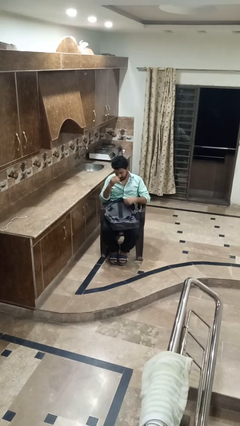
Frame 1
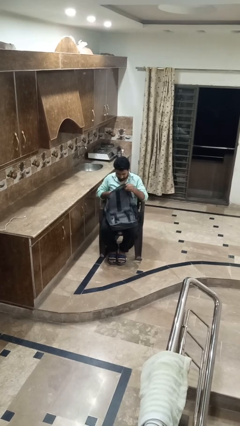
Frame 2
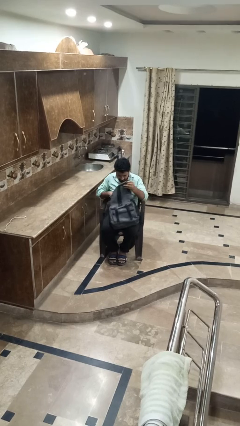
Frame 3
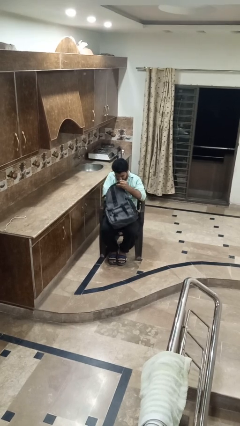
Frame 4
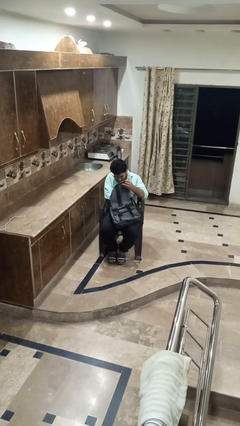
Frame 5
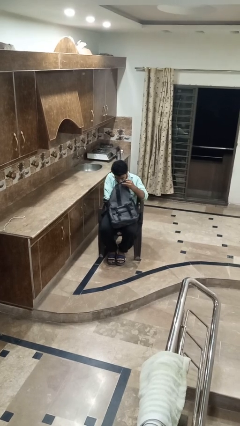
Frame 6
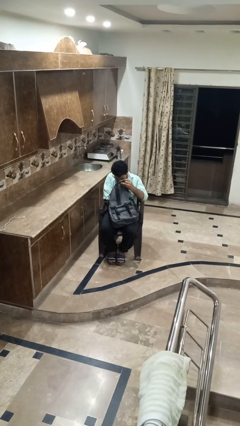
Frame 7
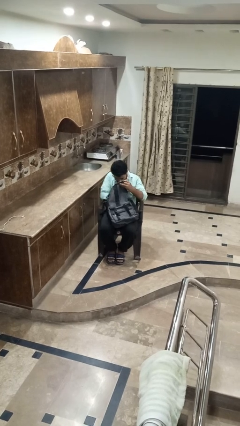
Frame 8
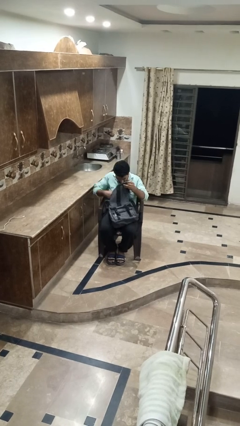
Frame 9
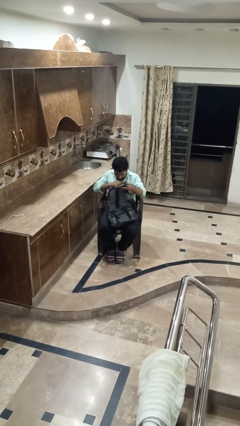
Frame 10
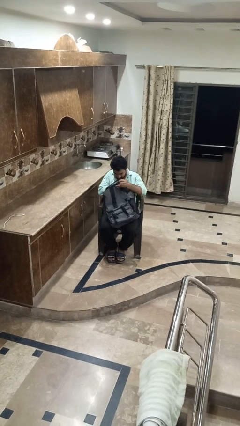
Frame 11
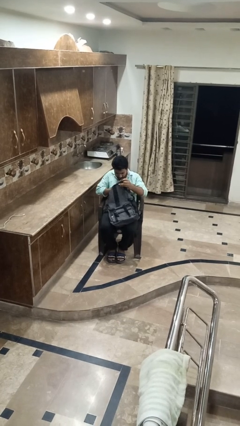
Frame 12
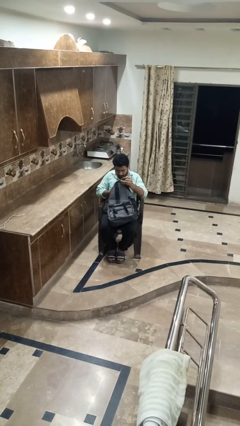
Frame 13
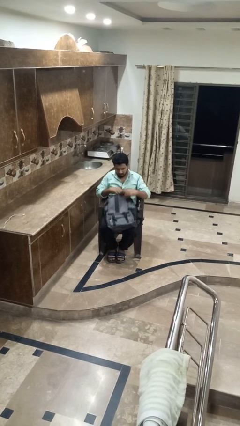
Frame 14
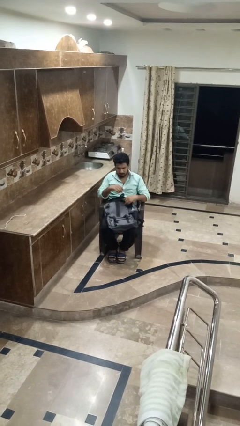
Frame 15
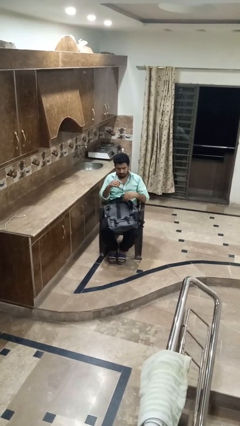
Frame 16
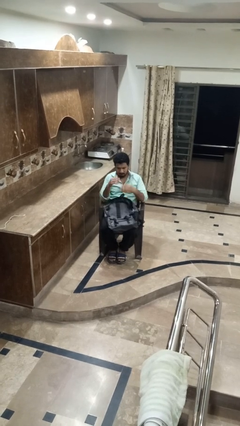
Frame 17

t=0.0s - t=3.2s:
person searches in bag

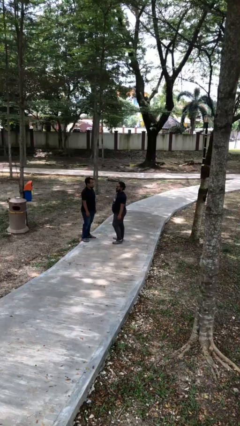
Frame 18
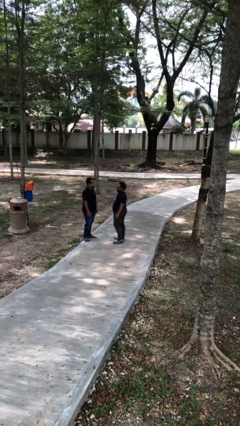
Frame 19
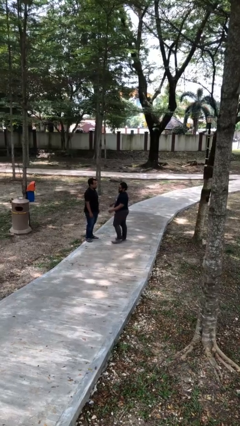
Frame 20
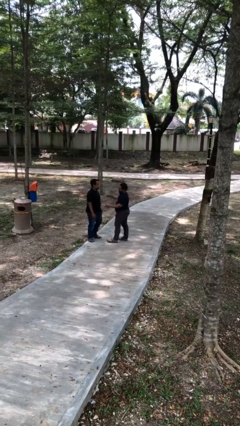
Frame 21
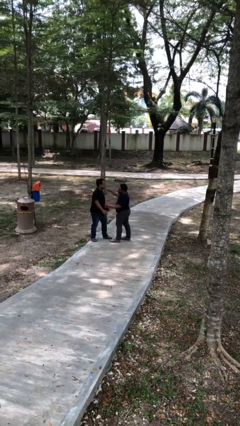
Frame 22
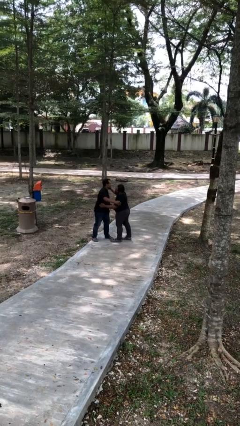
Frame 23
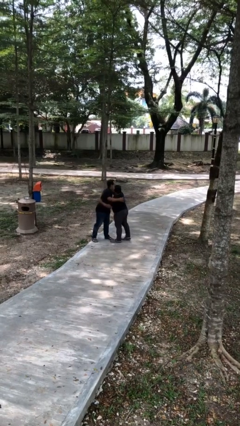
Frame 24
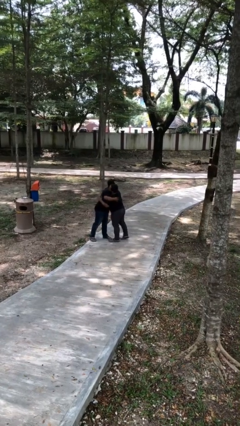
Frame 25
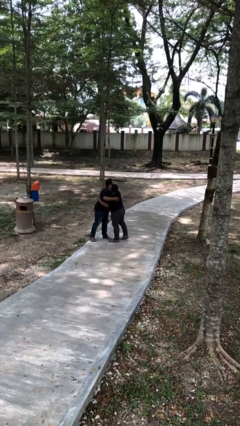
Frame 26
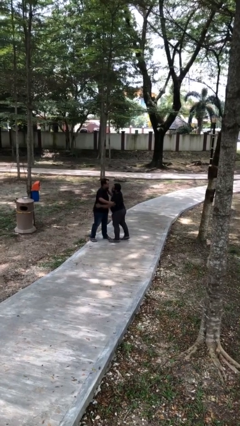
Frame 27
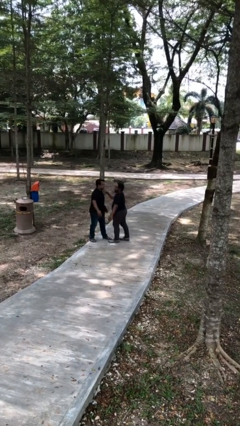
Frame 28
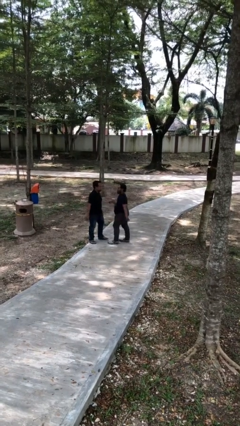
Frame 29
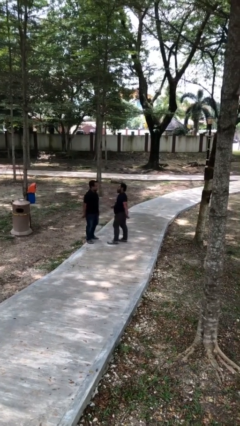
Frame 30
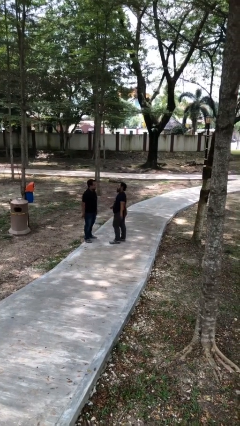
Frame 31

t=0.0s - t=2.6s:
person embraces person

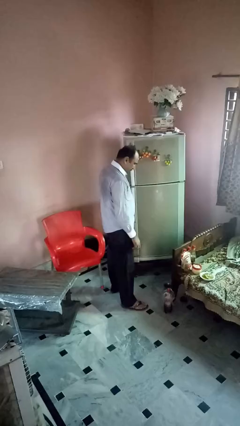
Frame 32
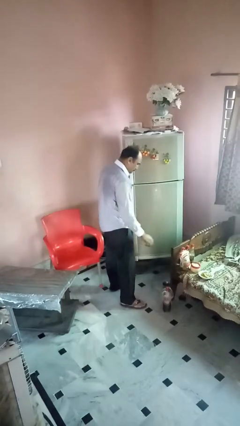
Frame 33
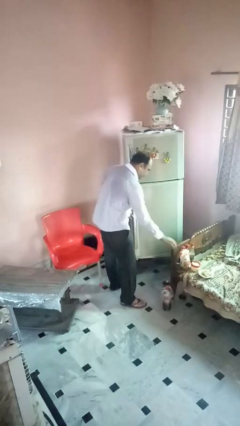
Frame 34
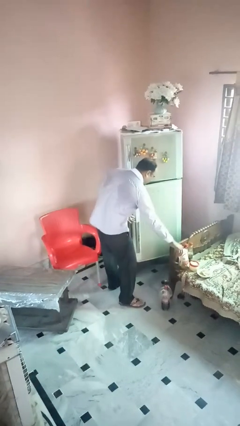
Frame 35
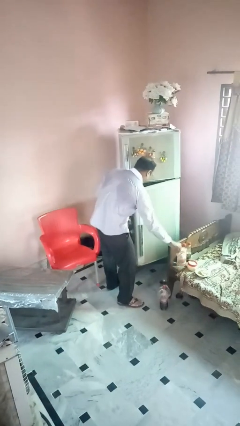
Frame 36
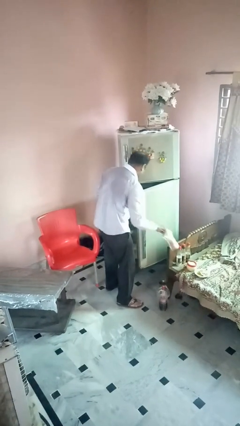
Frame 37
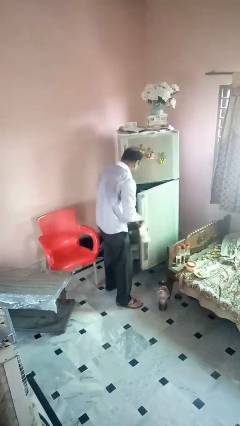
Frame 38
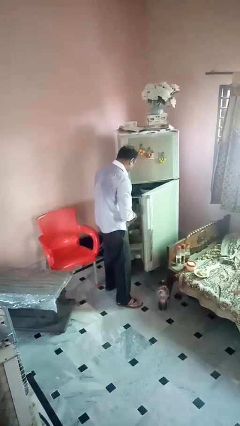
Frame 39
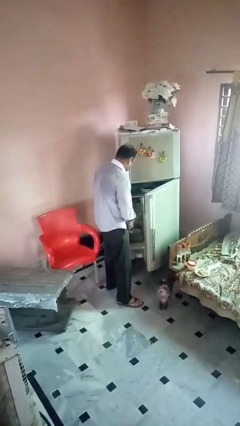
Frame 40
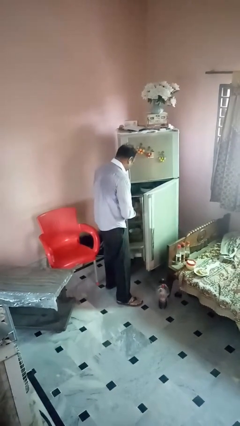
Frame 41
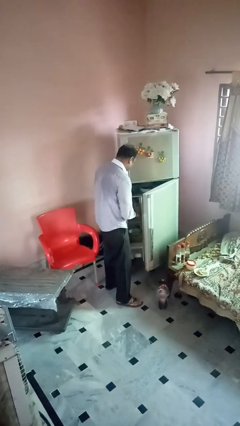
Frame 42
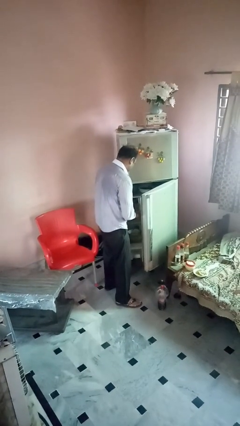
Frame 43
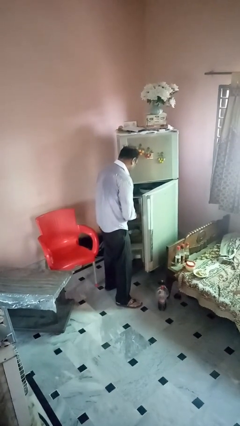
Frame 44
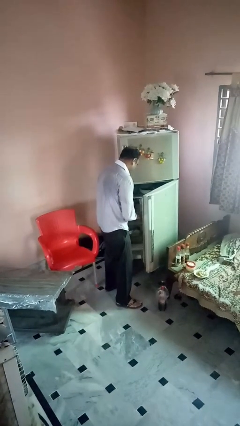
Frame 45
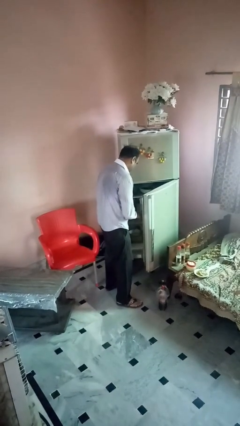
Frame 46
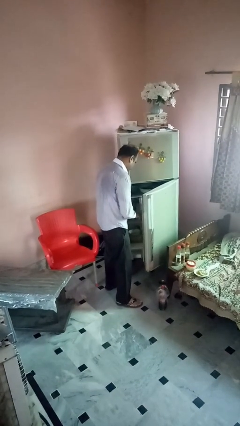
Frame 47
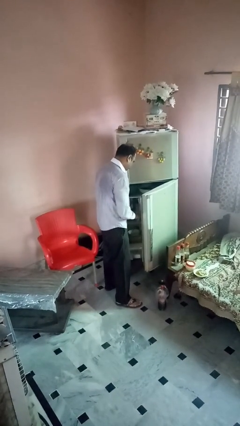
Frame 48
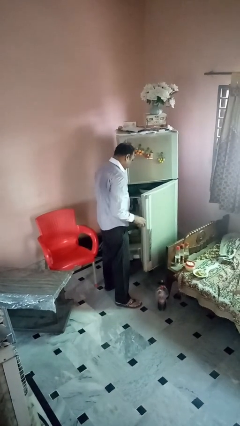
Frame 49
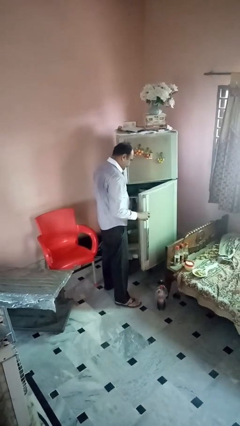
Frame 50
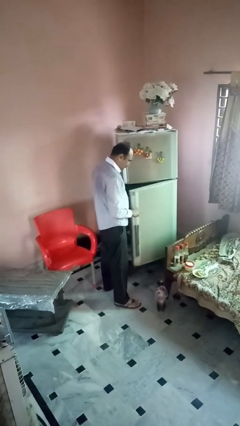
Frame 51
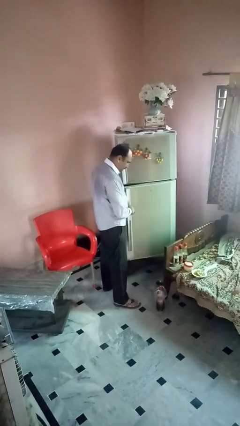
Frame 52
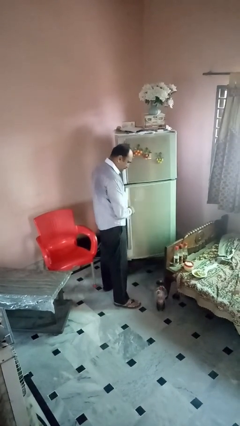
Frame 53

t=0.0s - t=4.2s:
person loads groceries into refrigerator

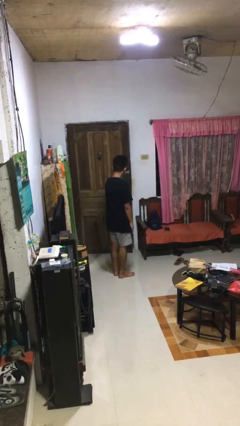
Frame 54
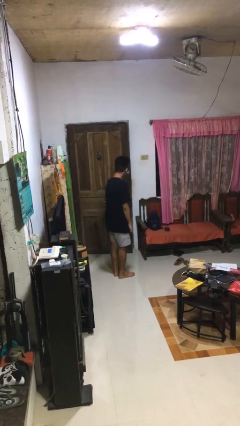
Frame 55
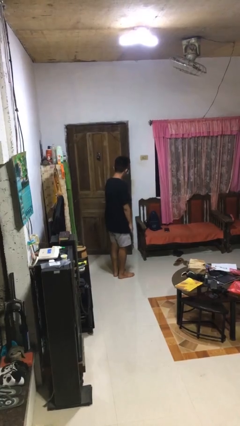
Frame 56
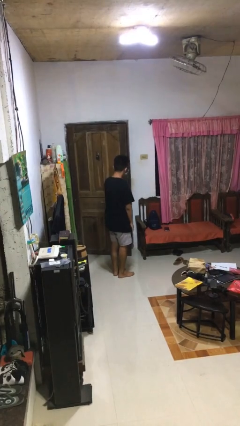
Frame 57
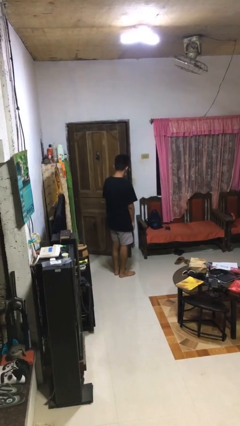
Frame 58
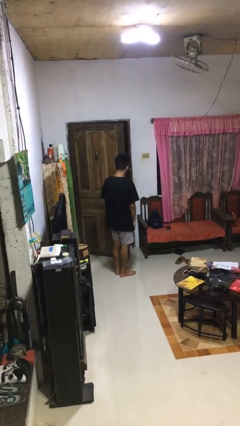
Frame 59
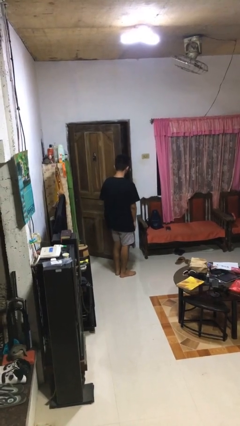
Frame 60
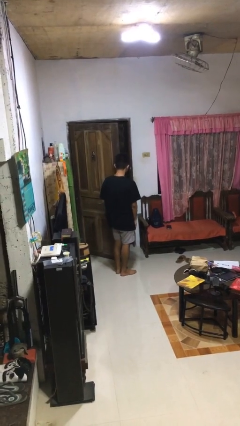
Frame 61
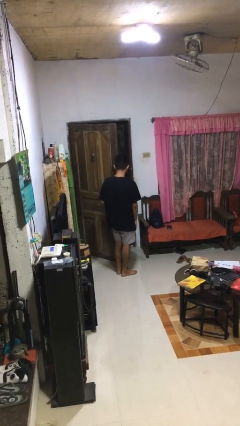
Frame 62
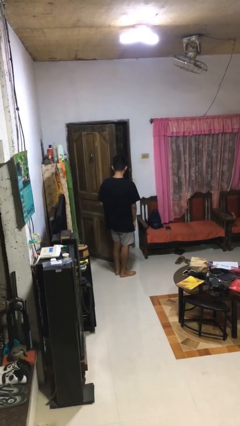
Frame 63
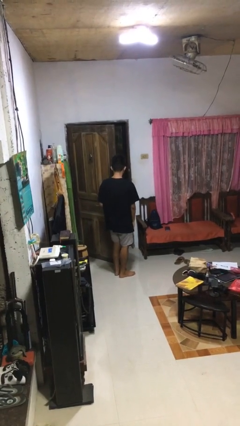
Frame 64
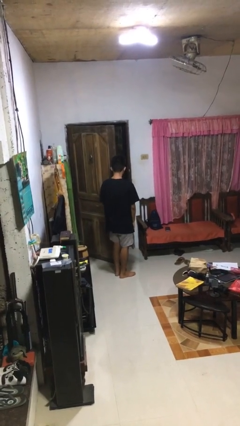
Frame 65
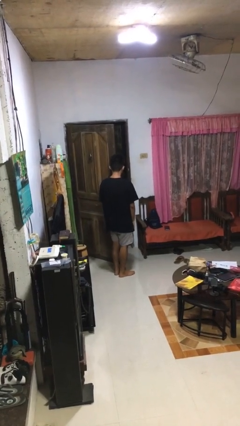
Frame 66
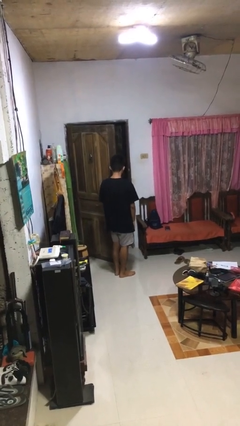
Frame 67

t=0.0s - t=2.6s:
person opens facility door

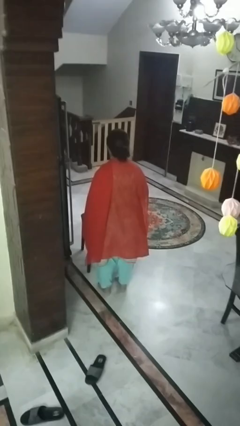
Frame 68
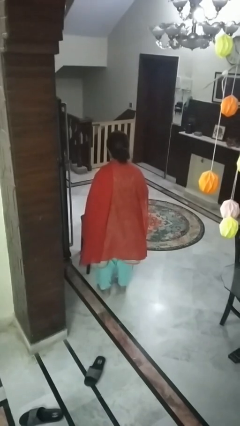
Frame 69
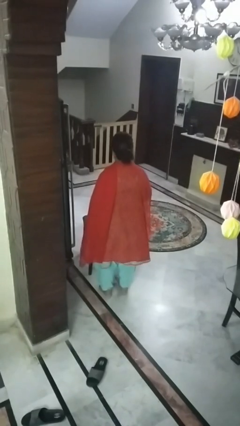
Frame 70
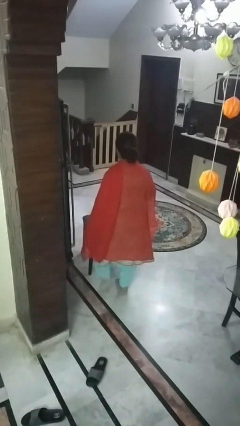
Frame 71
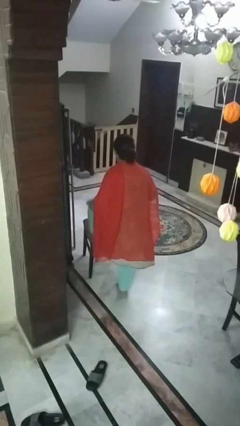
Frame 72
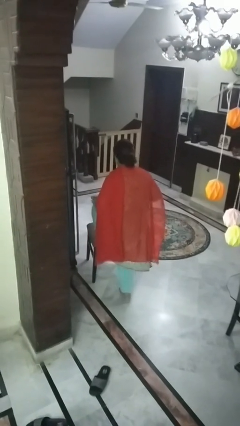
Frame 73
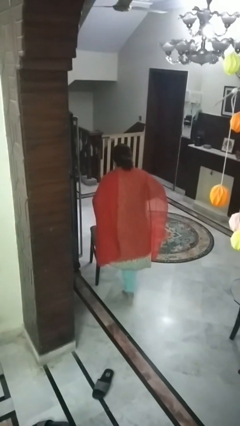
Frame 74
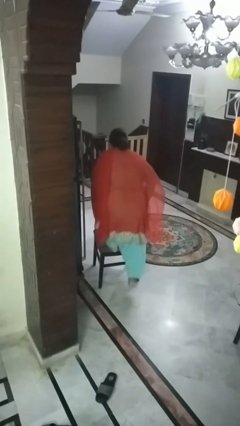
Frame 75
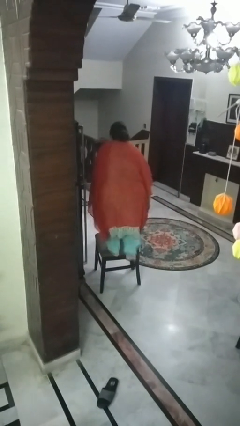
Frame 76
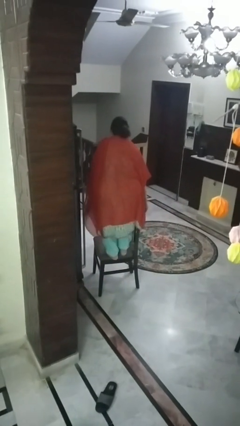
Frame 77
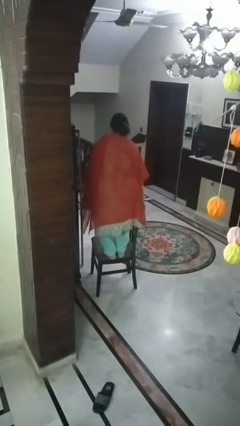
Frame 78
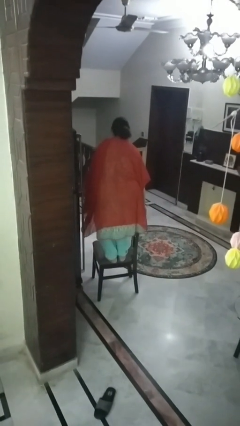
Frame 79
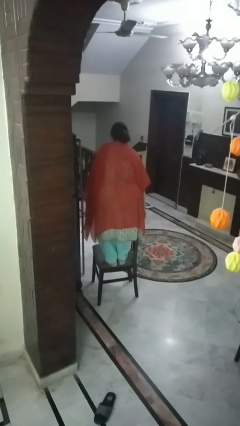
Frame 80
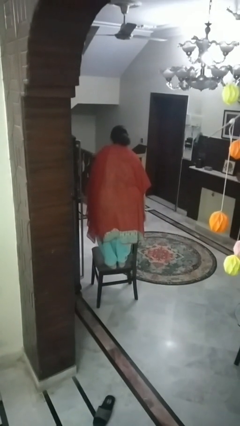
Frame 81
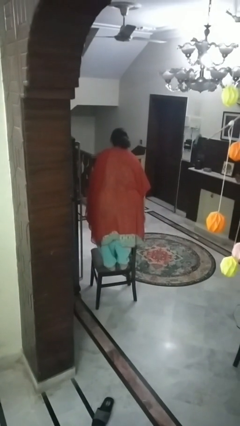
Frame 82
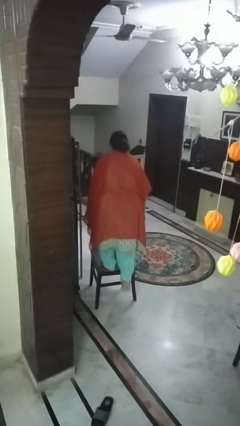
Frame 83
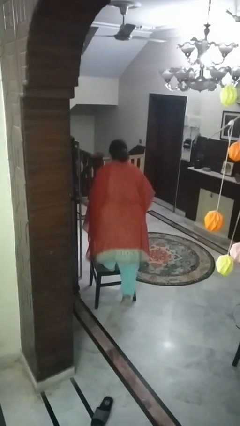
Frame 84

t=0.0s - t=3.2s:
person climbs on chair

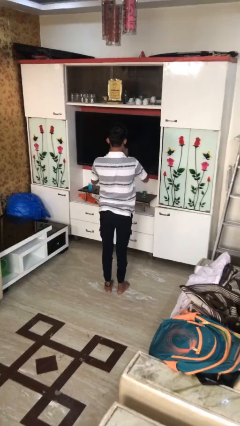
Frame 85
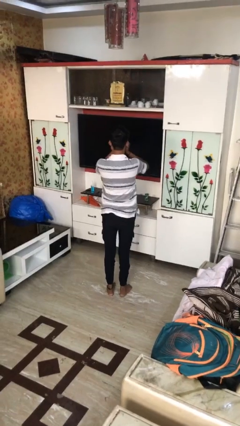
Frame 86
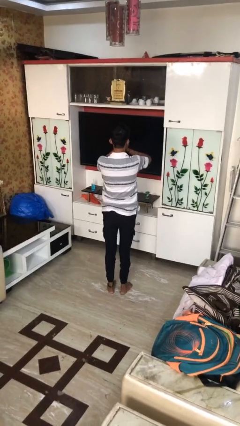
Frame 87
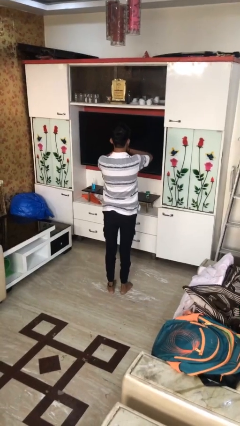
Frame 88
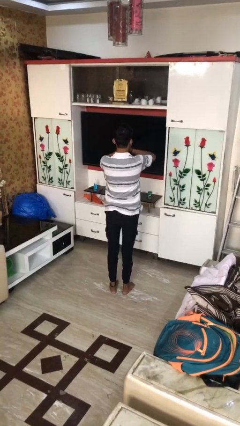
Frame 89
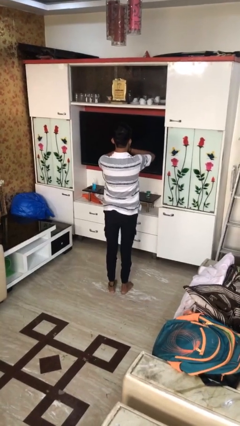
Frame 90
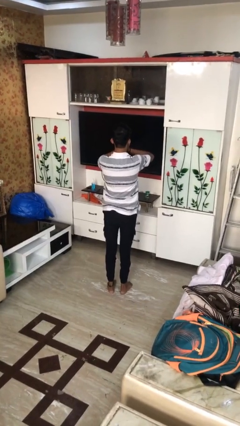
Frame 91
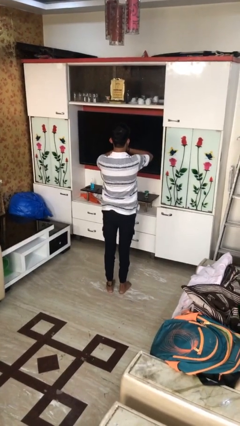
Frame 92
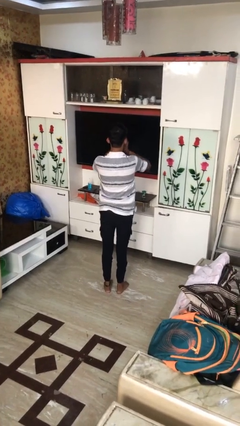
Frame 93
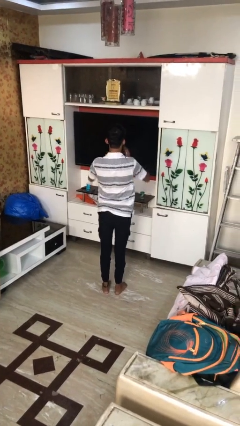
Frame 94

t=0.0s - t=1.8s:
person covers face with hands
